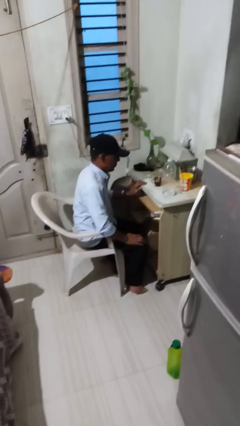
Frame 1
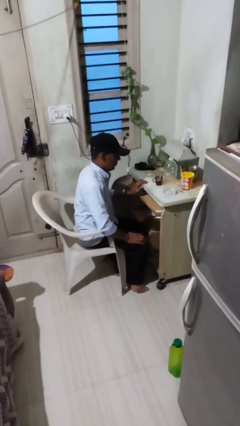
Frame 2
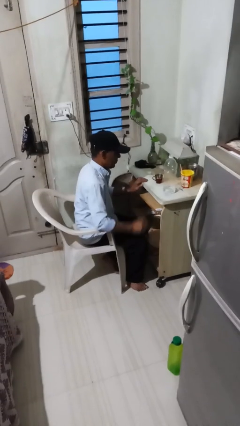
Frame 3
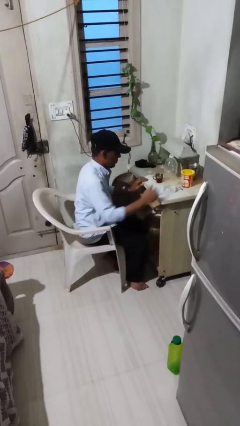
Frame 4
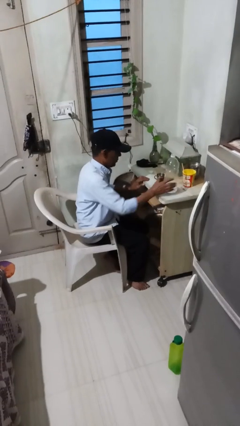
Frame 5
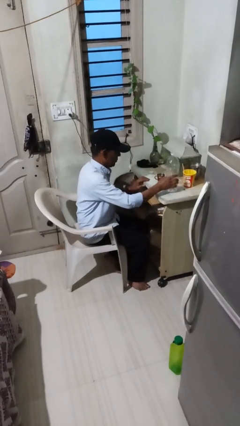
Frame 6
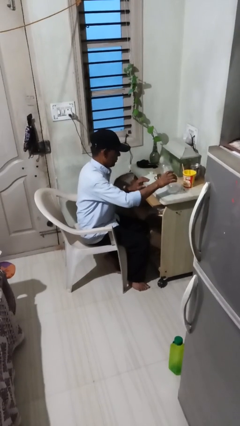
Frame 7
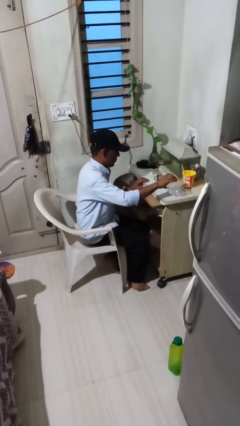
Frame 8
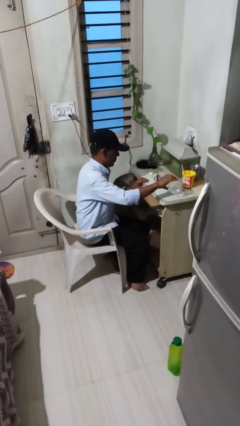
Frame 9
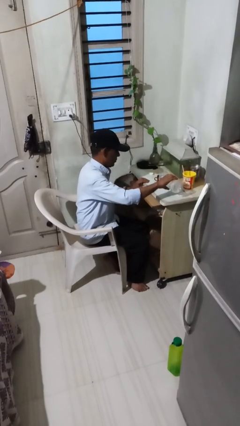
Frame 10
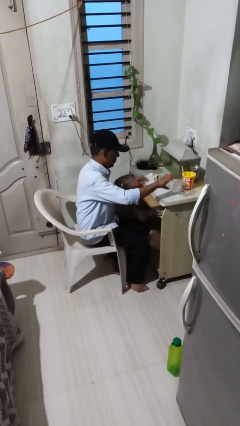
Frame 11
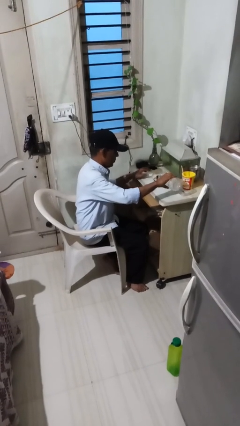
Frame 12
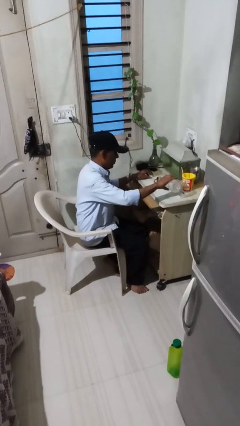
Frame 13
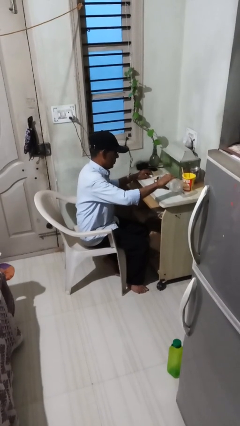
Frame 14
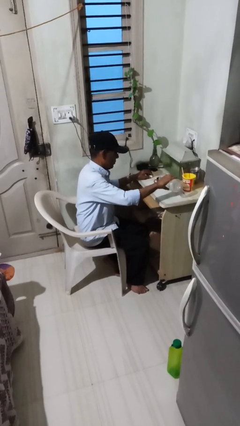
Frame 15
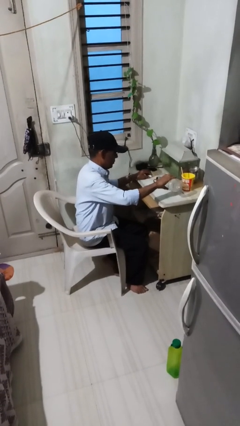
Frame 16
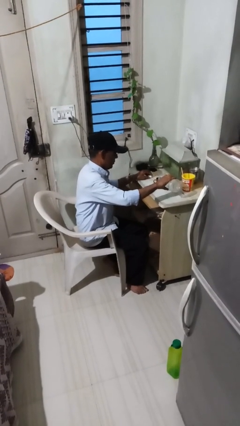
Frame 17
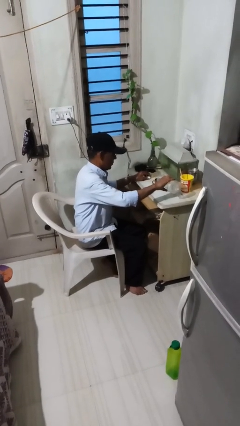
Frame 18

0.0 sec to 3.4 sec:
person pours liquid into cup

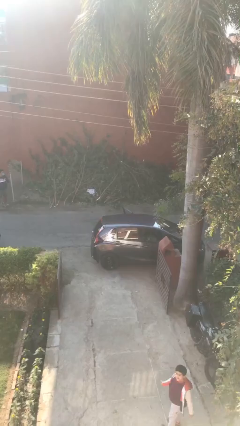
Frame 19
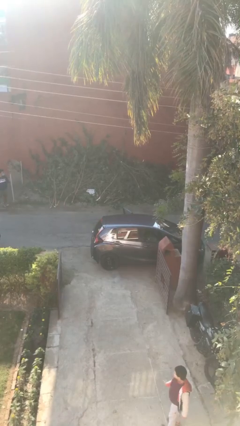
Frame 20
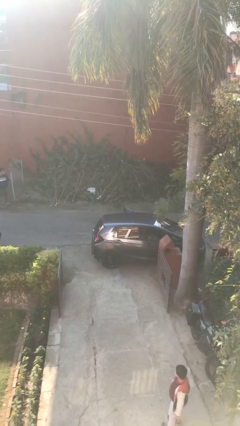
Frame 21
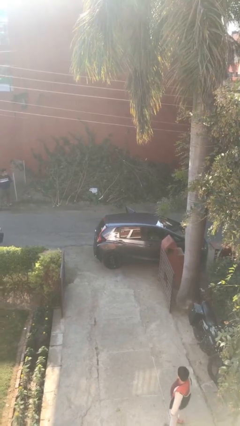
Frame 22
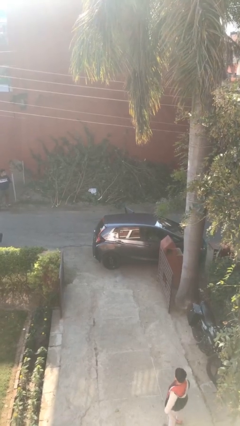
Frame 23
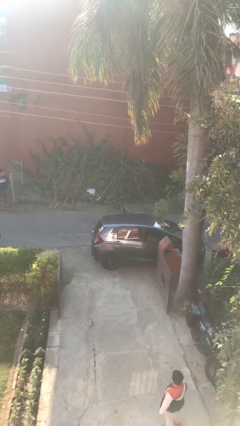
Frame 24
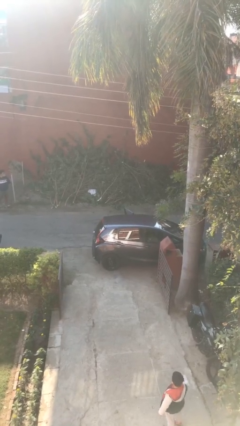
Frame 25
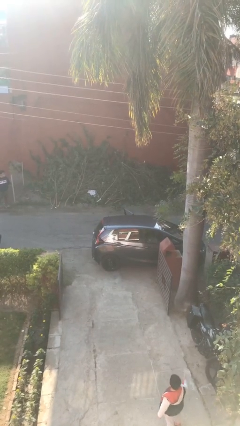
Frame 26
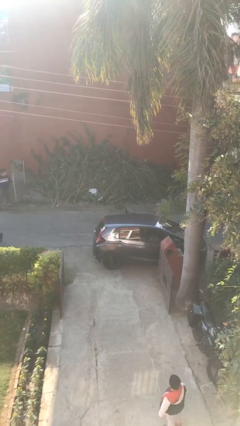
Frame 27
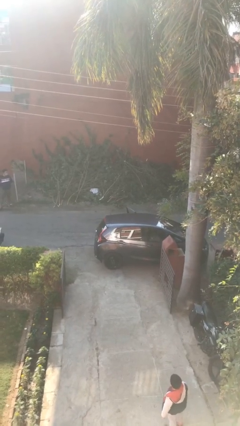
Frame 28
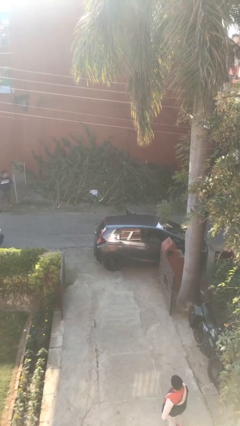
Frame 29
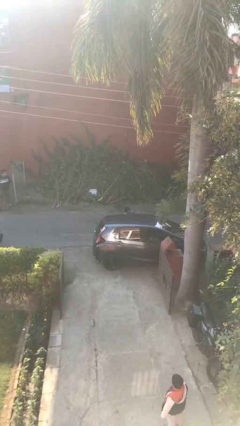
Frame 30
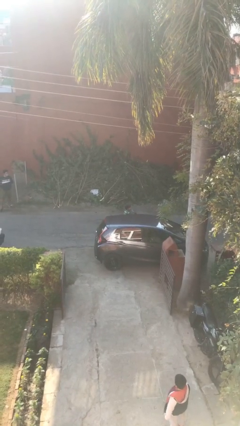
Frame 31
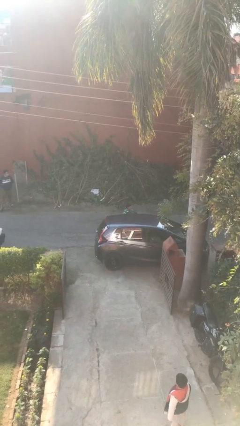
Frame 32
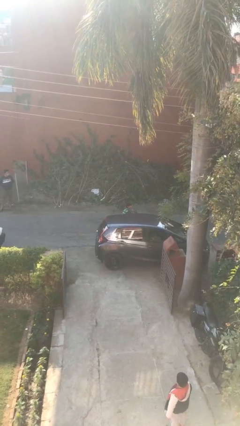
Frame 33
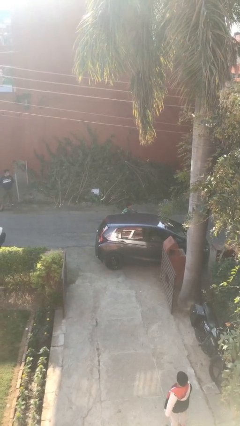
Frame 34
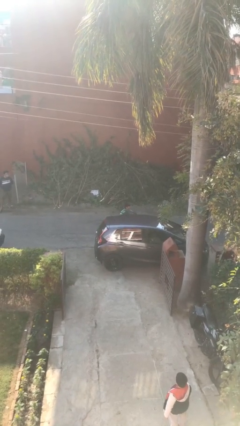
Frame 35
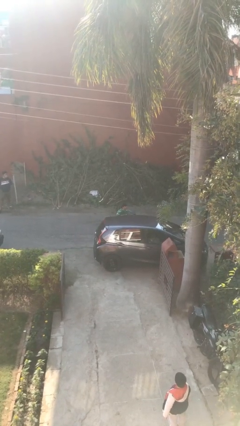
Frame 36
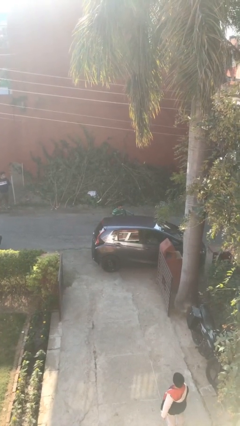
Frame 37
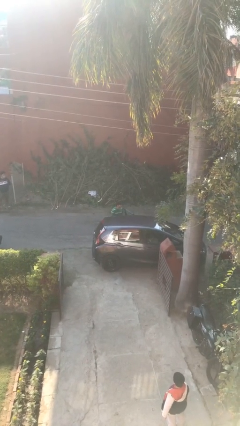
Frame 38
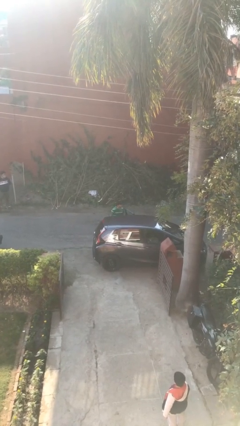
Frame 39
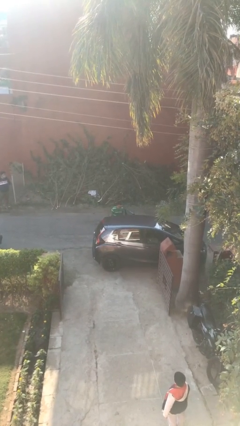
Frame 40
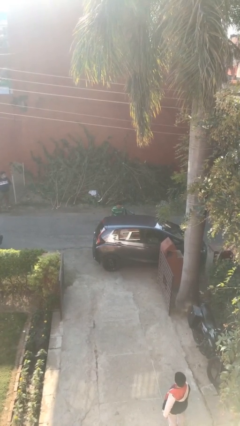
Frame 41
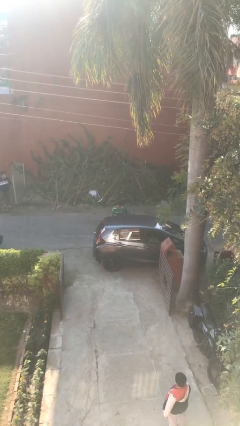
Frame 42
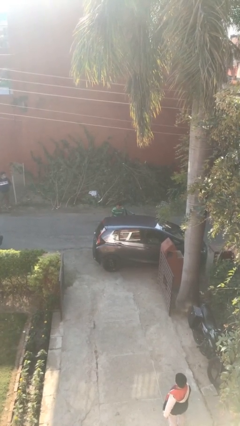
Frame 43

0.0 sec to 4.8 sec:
person exits car

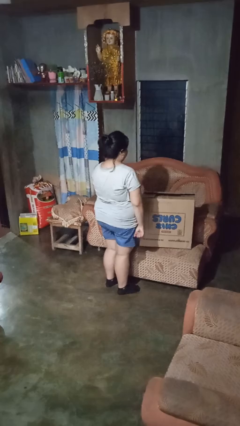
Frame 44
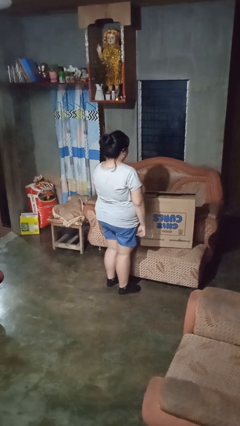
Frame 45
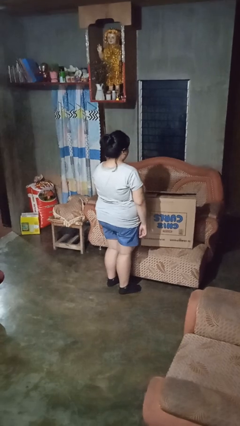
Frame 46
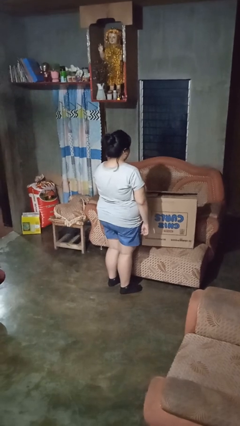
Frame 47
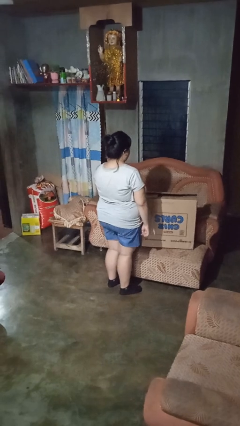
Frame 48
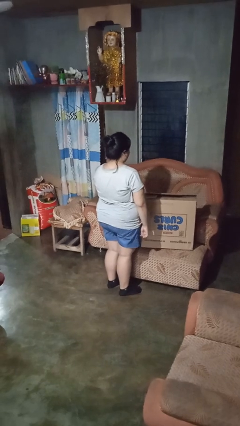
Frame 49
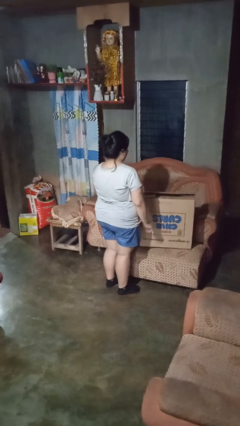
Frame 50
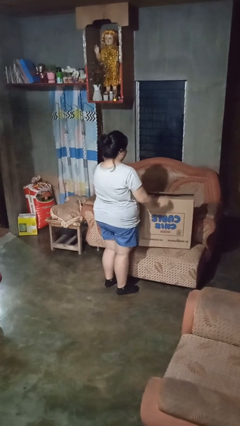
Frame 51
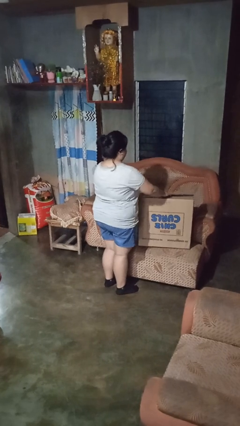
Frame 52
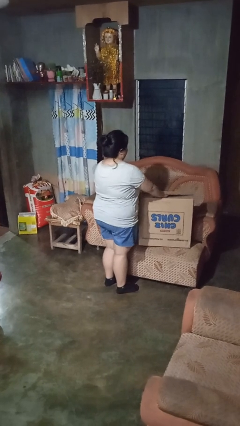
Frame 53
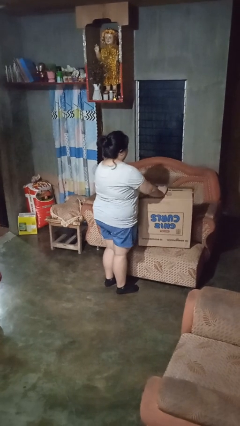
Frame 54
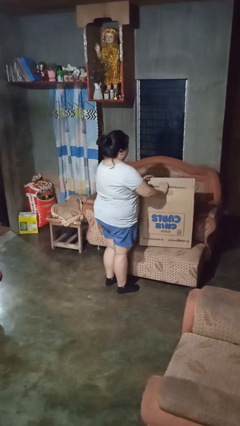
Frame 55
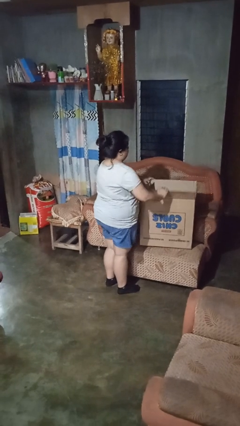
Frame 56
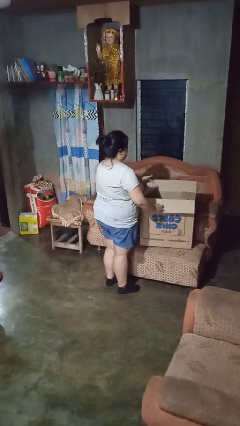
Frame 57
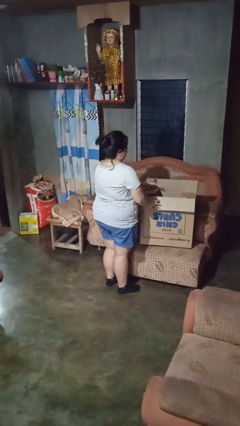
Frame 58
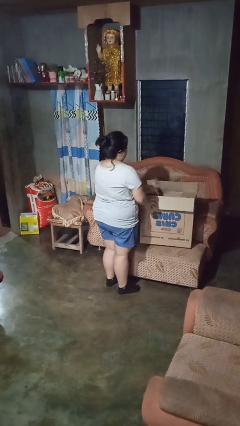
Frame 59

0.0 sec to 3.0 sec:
person opens box

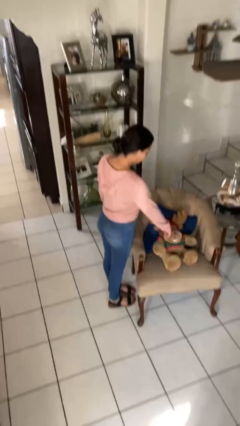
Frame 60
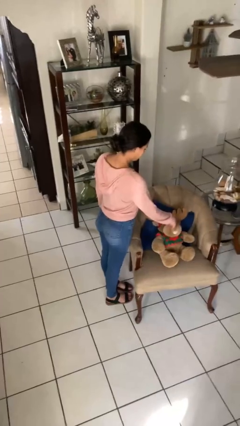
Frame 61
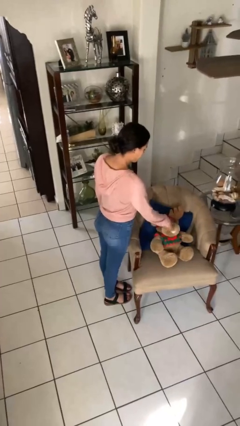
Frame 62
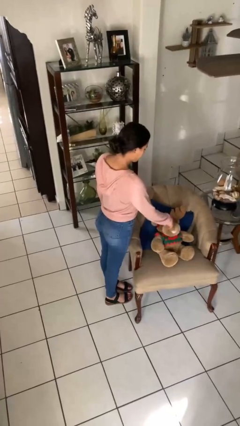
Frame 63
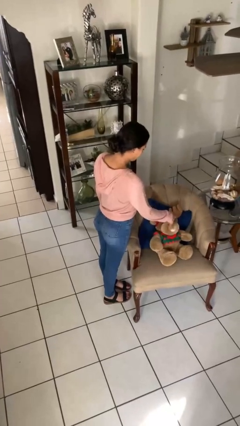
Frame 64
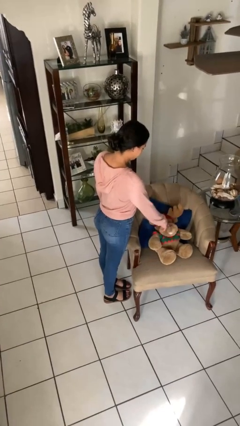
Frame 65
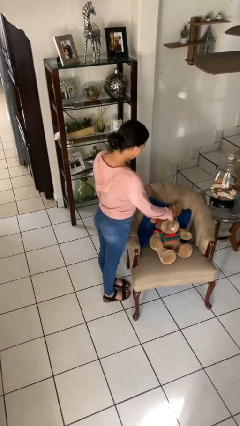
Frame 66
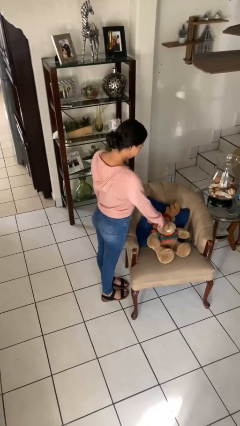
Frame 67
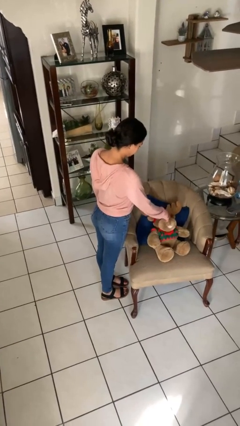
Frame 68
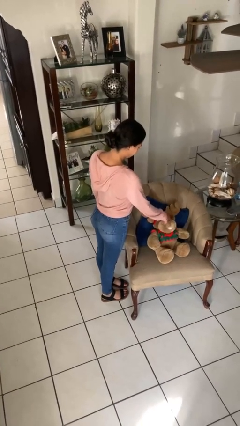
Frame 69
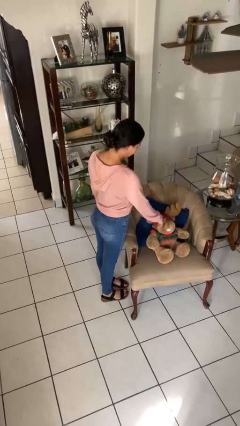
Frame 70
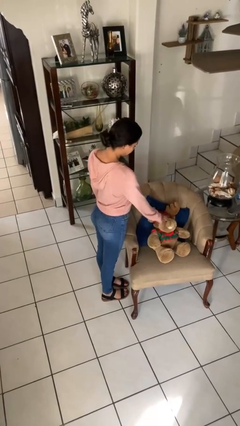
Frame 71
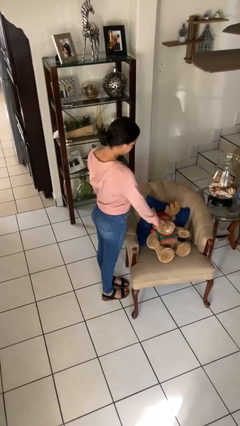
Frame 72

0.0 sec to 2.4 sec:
person taps object with finger

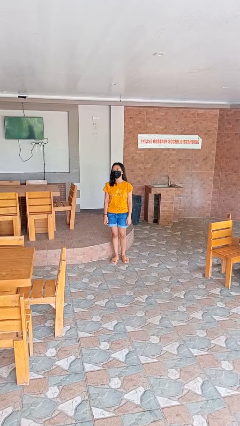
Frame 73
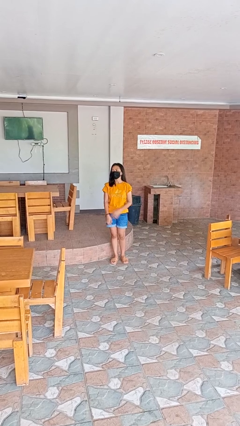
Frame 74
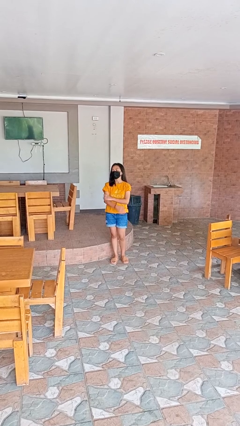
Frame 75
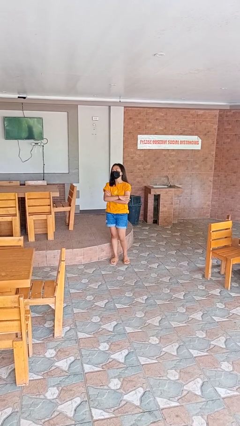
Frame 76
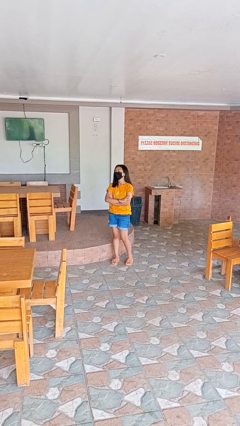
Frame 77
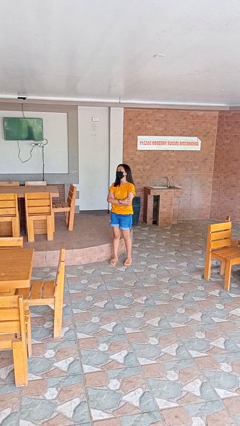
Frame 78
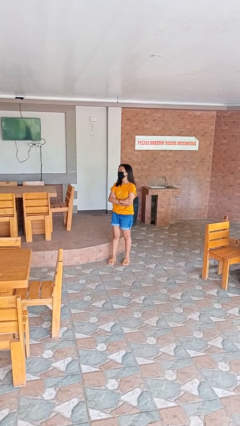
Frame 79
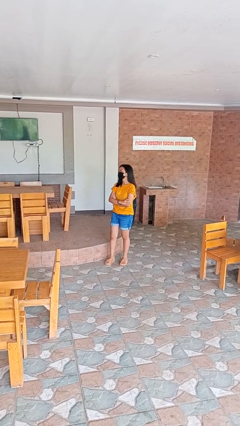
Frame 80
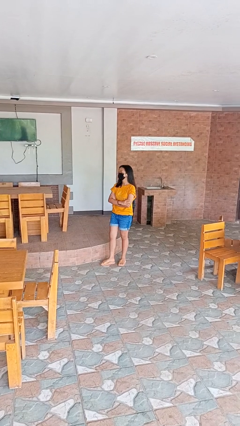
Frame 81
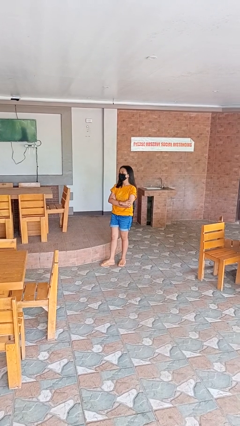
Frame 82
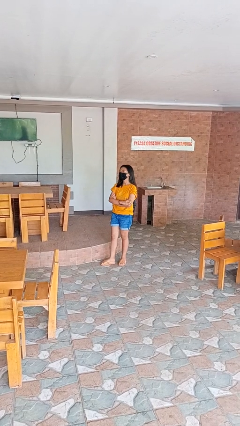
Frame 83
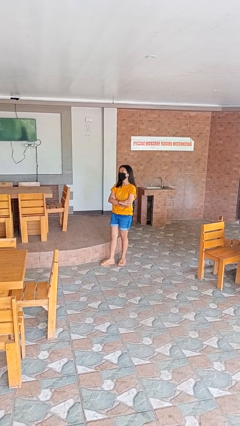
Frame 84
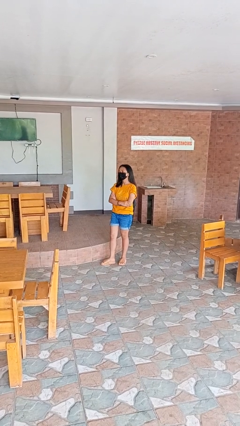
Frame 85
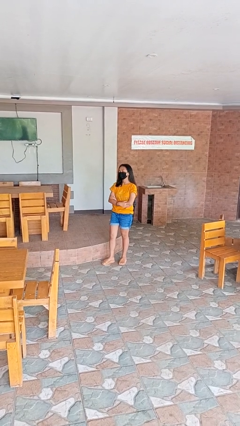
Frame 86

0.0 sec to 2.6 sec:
person crosses arms

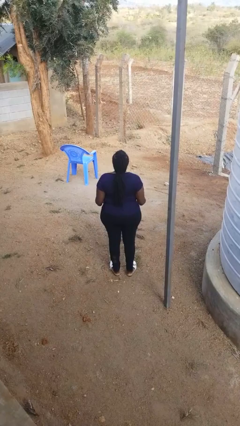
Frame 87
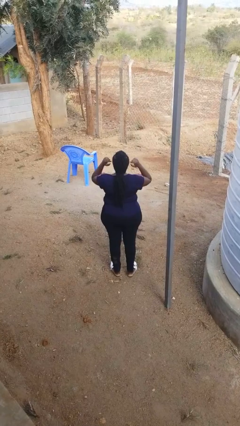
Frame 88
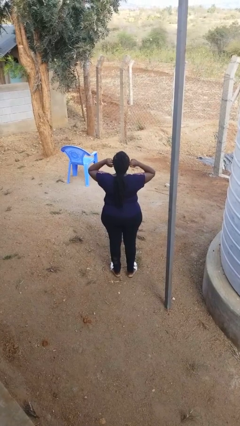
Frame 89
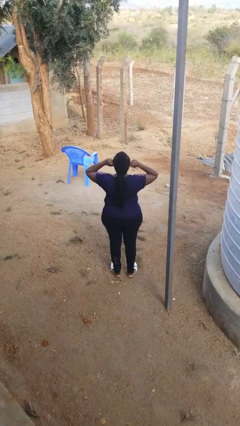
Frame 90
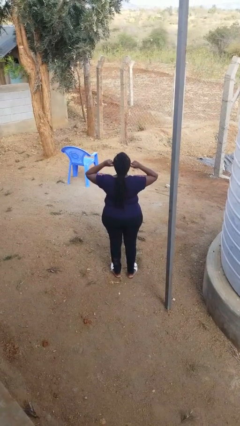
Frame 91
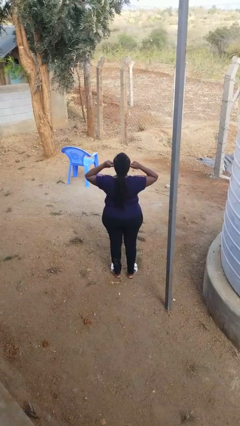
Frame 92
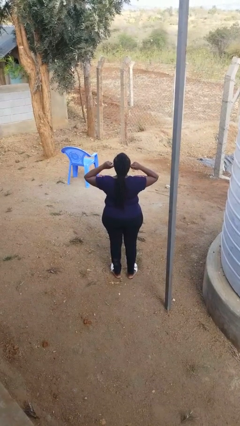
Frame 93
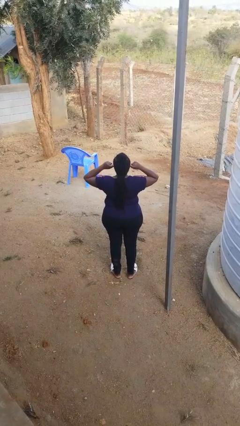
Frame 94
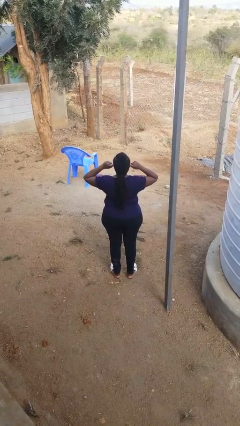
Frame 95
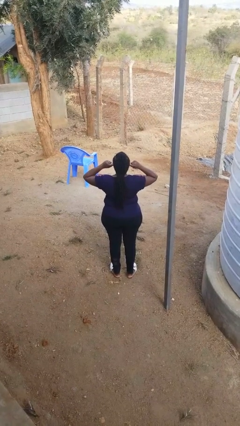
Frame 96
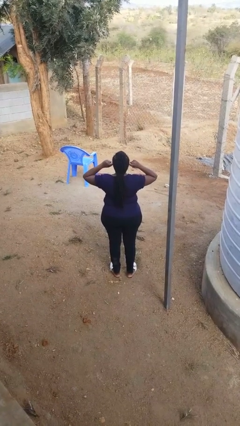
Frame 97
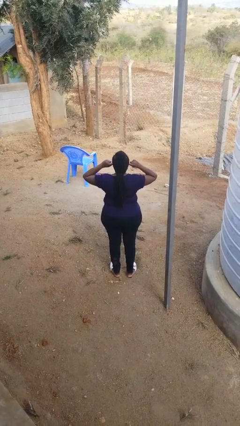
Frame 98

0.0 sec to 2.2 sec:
person puts fingers in ear
